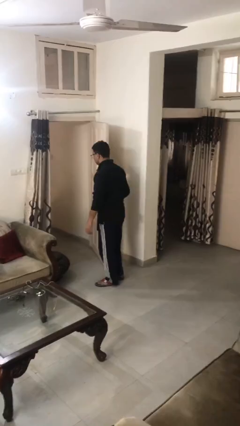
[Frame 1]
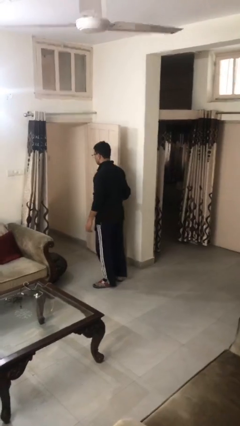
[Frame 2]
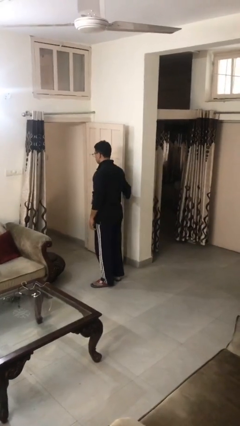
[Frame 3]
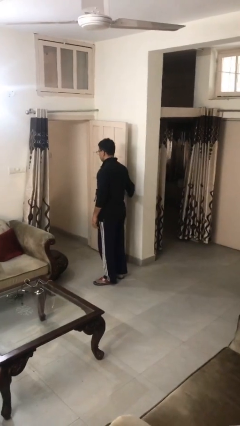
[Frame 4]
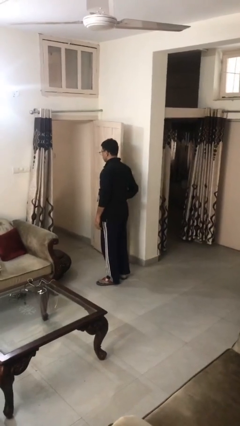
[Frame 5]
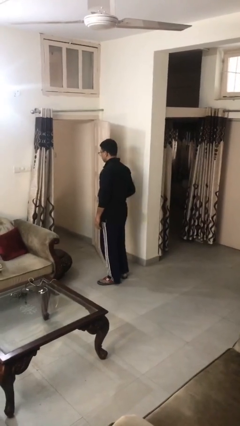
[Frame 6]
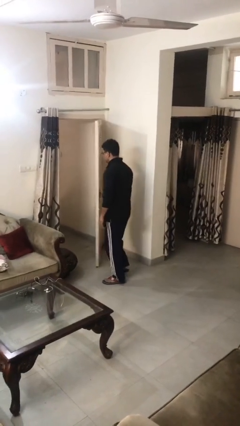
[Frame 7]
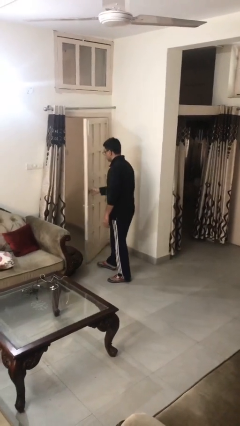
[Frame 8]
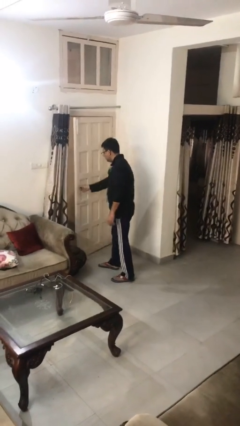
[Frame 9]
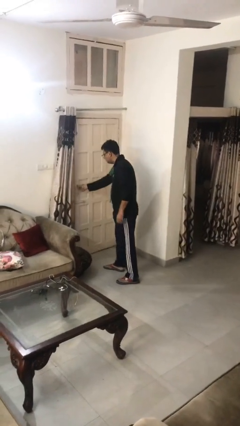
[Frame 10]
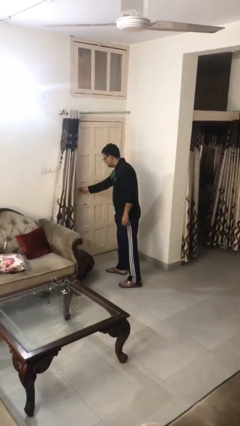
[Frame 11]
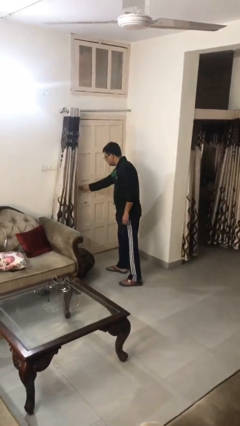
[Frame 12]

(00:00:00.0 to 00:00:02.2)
person closes facility door

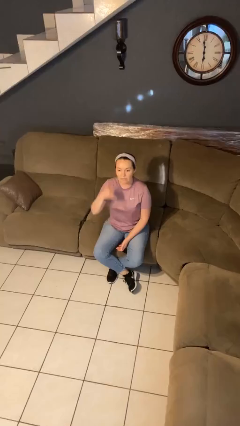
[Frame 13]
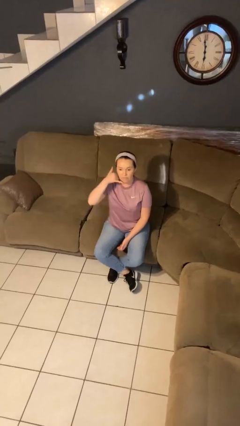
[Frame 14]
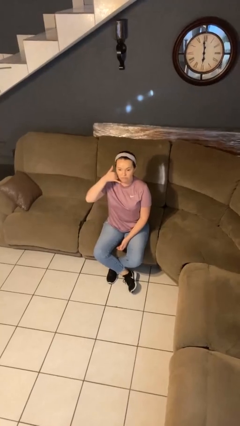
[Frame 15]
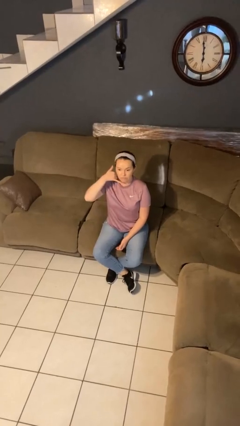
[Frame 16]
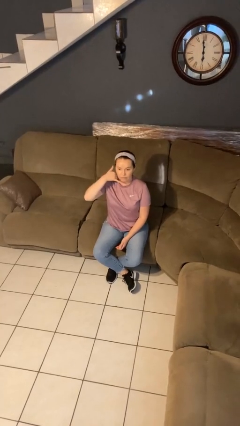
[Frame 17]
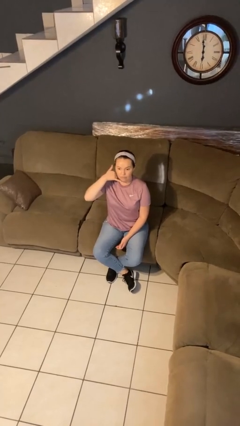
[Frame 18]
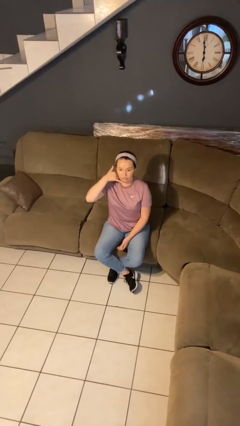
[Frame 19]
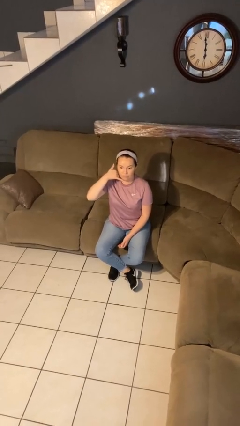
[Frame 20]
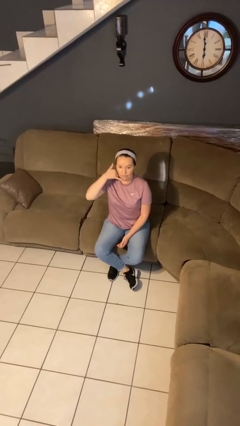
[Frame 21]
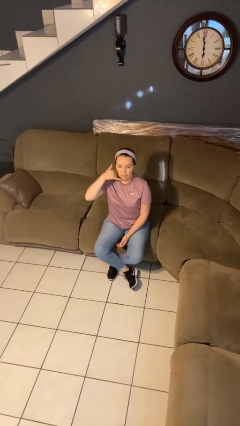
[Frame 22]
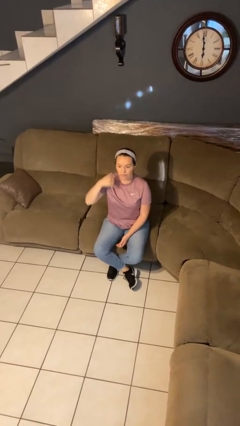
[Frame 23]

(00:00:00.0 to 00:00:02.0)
person gestures call me

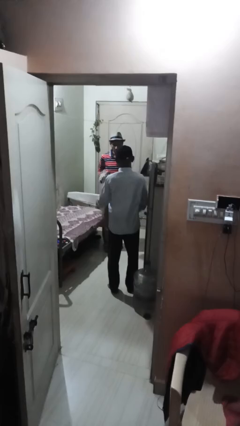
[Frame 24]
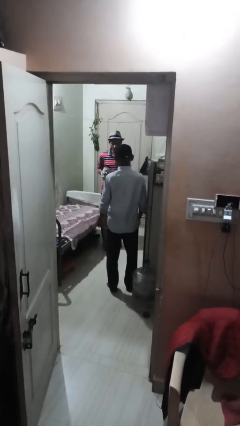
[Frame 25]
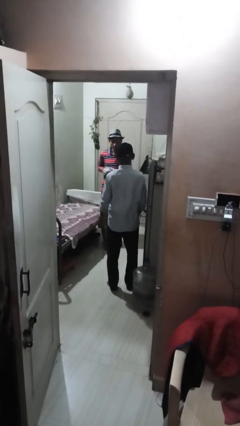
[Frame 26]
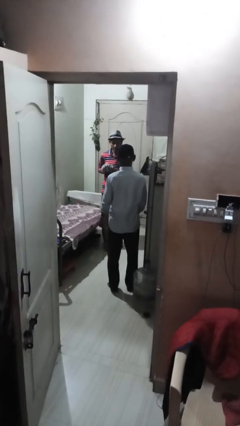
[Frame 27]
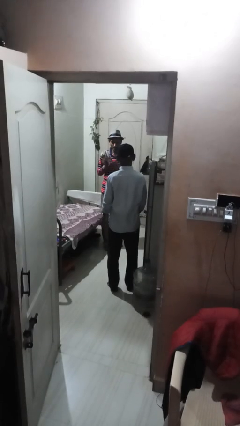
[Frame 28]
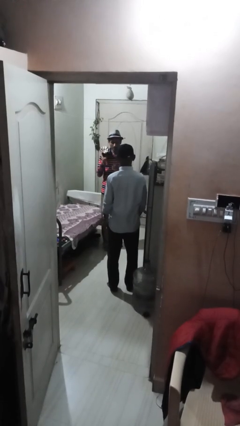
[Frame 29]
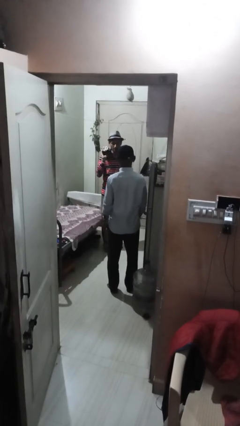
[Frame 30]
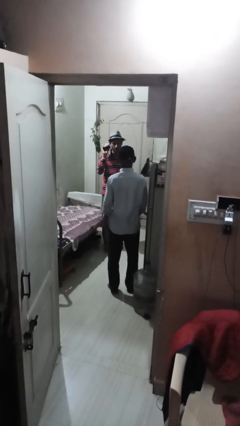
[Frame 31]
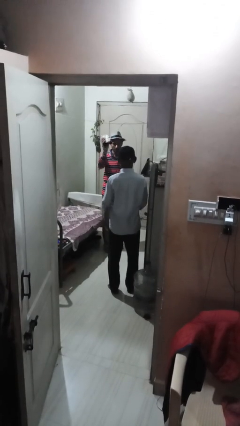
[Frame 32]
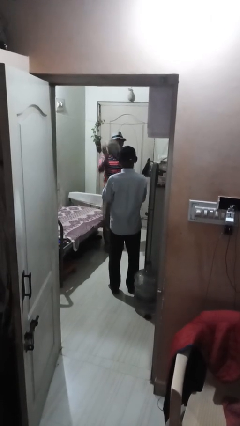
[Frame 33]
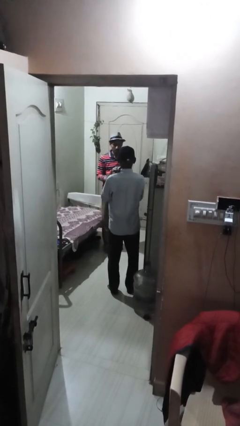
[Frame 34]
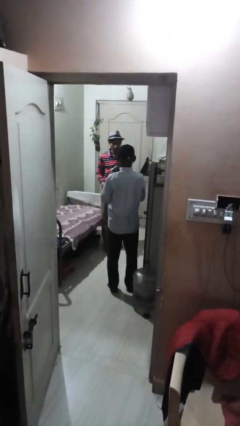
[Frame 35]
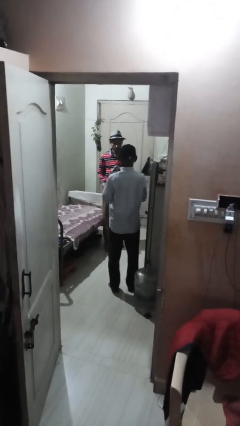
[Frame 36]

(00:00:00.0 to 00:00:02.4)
person catches object from person

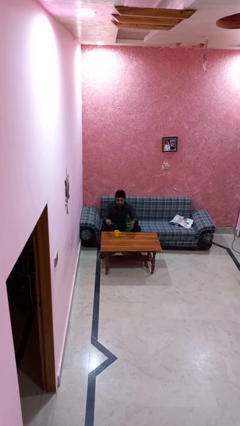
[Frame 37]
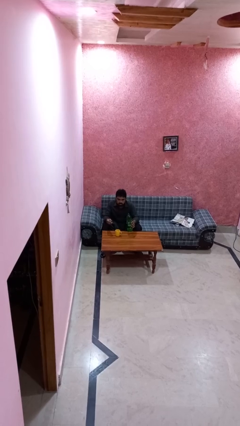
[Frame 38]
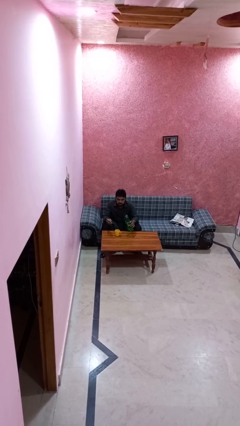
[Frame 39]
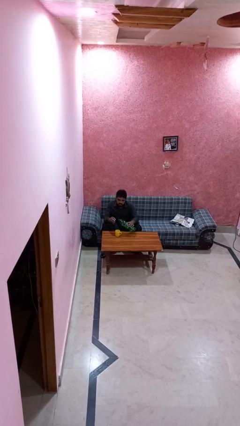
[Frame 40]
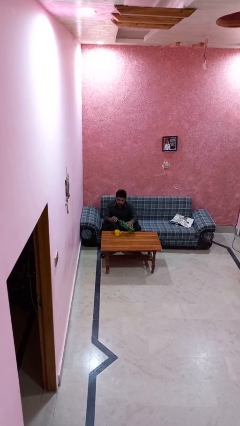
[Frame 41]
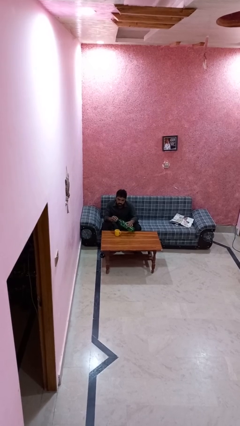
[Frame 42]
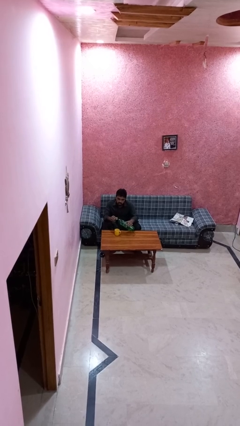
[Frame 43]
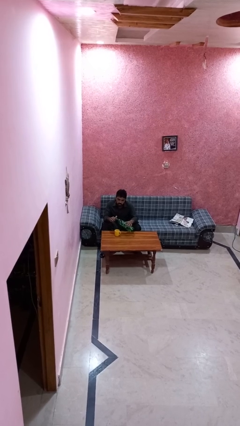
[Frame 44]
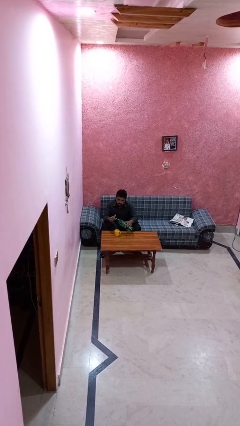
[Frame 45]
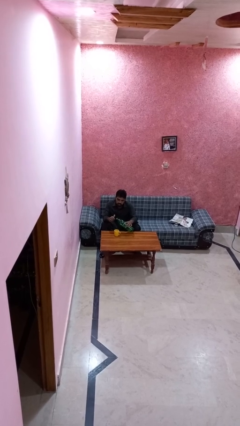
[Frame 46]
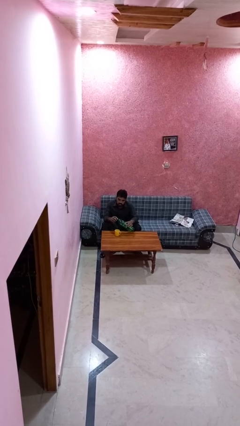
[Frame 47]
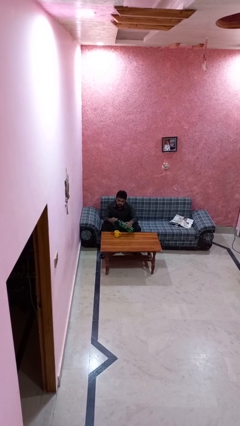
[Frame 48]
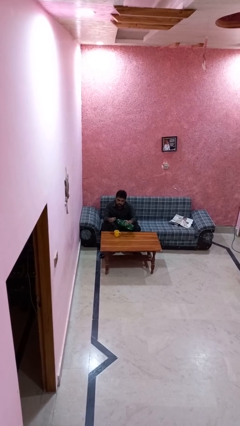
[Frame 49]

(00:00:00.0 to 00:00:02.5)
person screws lid to bottle

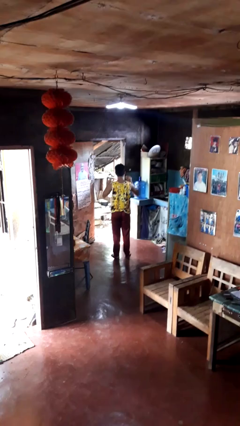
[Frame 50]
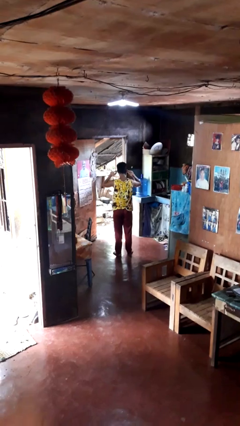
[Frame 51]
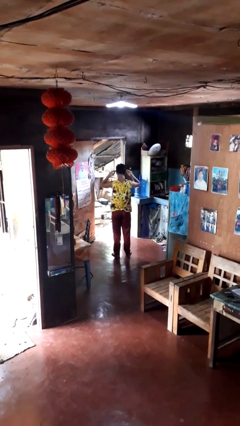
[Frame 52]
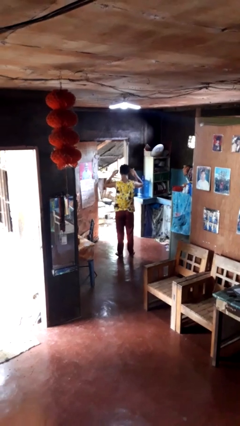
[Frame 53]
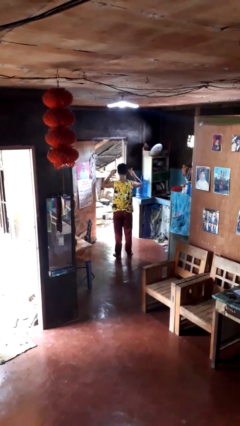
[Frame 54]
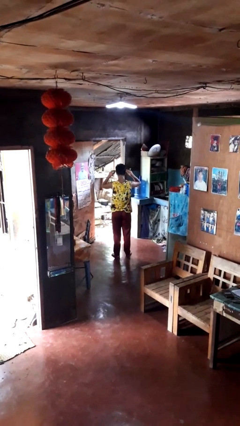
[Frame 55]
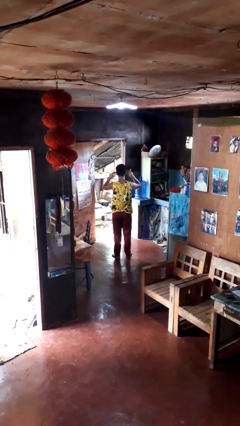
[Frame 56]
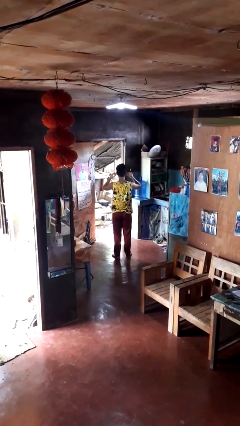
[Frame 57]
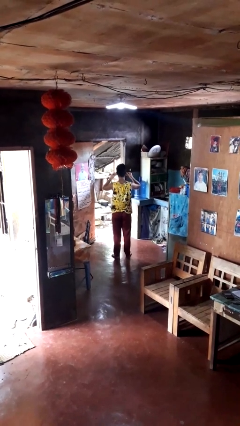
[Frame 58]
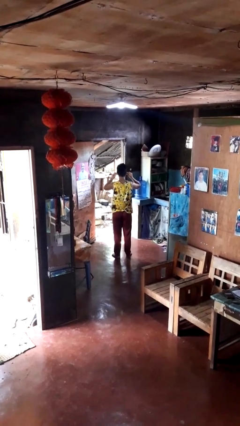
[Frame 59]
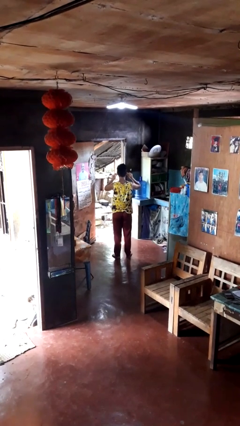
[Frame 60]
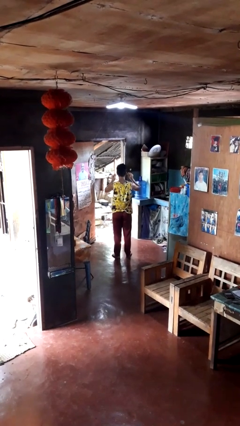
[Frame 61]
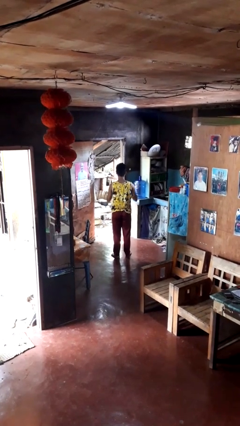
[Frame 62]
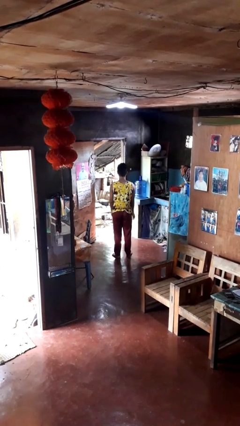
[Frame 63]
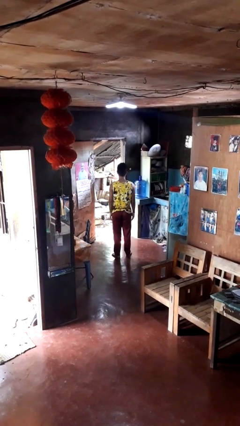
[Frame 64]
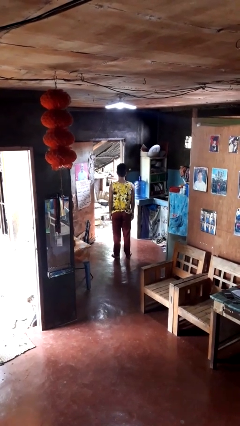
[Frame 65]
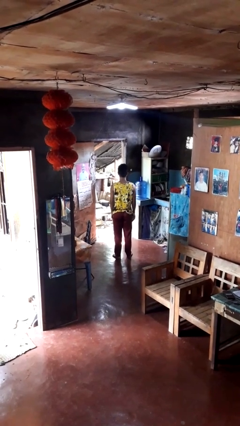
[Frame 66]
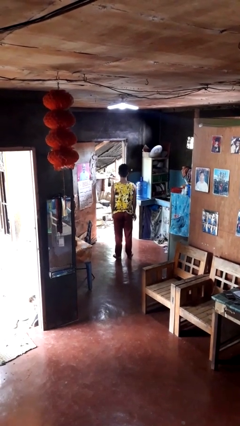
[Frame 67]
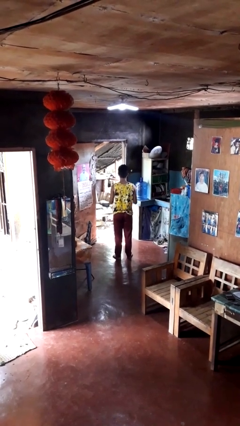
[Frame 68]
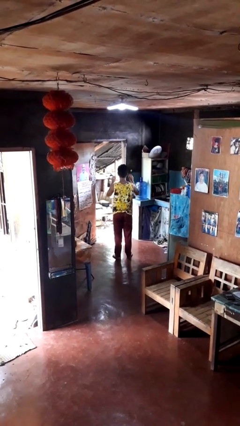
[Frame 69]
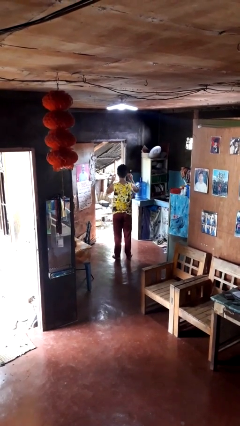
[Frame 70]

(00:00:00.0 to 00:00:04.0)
person puts on headphones

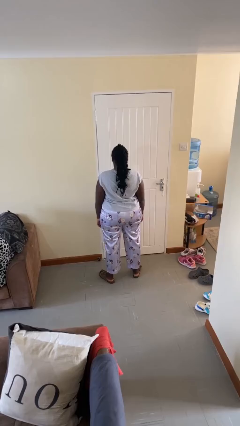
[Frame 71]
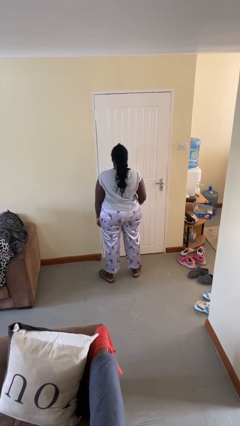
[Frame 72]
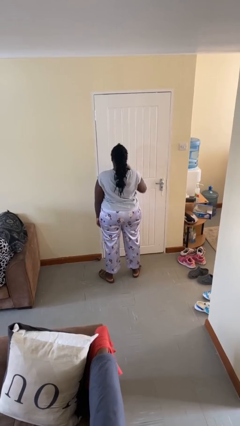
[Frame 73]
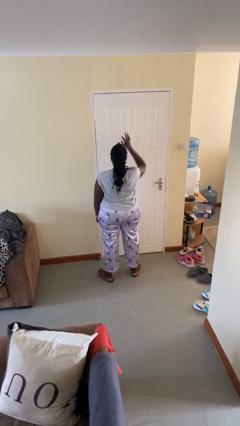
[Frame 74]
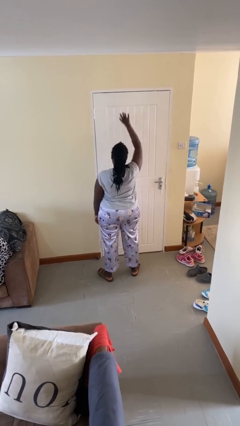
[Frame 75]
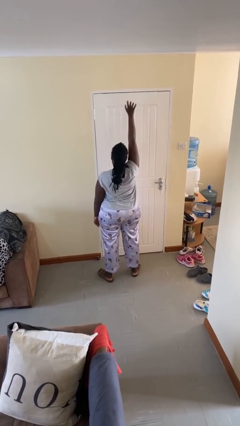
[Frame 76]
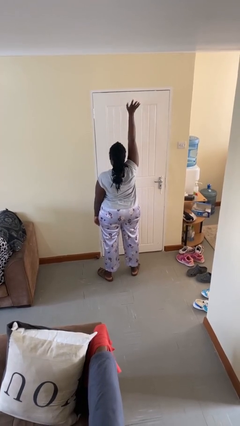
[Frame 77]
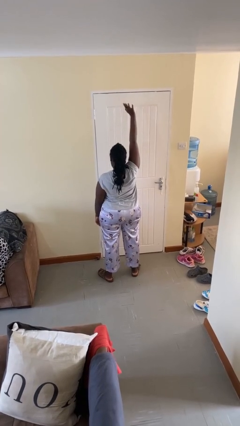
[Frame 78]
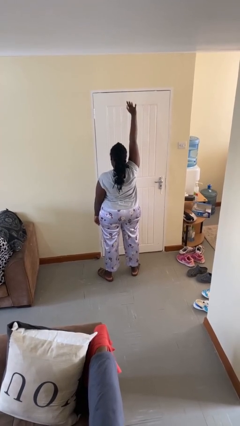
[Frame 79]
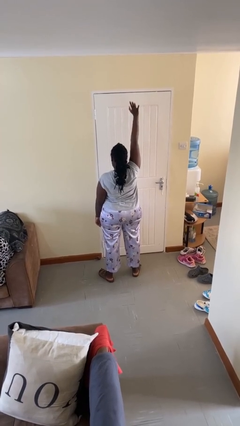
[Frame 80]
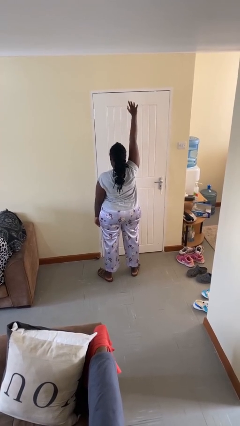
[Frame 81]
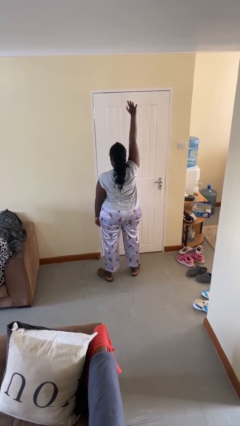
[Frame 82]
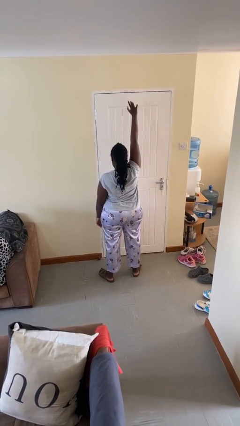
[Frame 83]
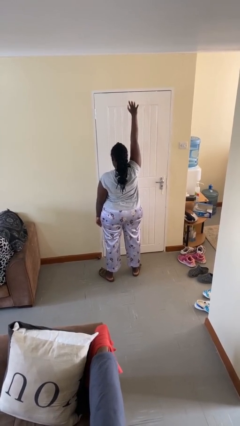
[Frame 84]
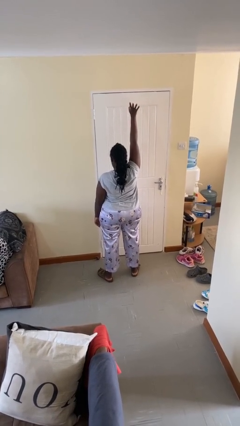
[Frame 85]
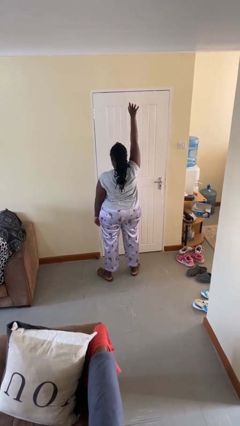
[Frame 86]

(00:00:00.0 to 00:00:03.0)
person gestures raise hand

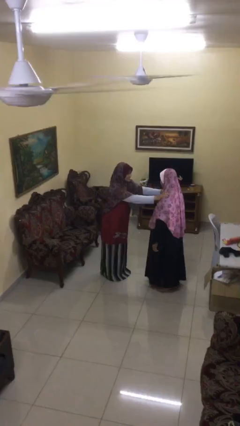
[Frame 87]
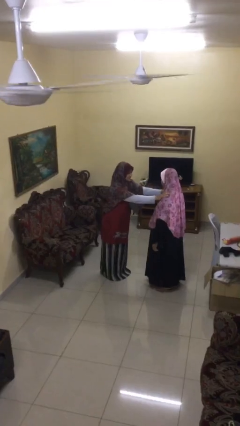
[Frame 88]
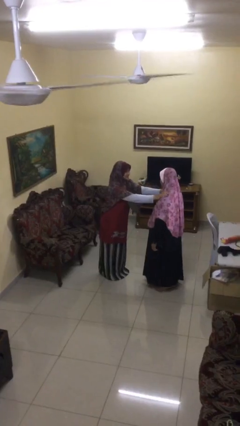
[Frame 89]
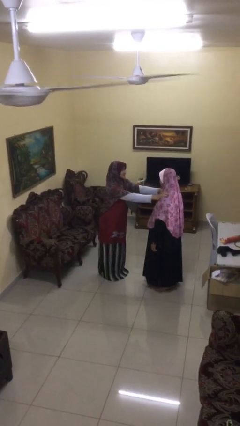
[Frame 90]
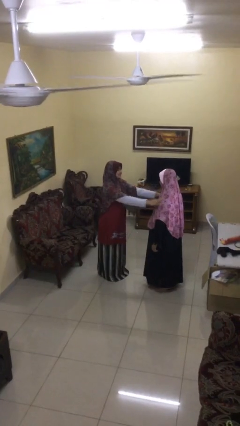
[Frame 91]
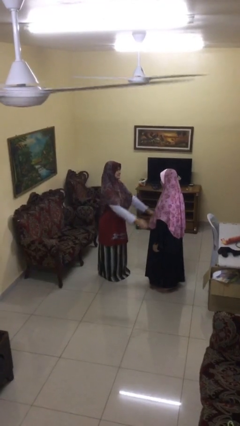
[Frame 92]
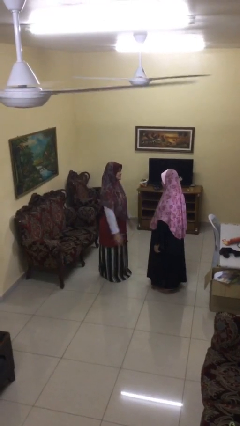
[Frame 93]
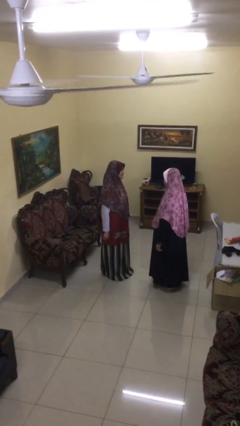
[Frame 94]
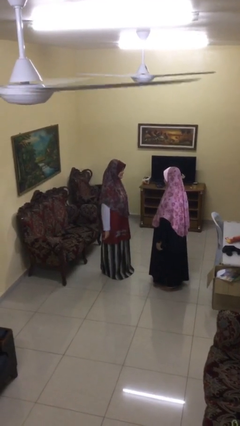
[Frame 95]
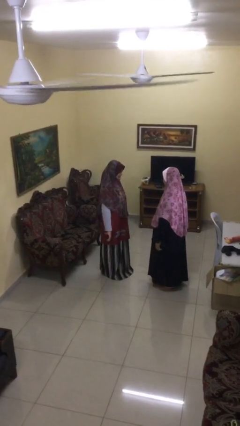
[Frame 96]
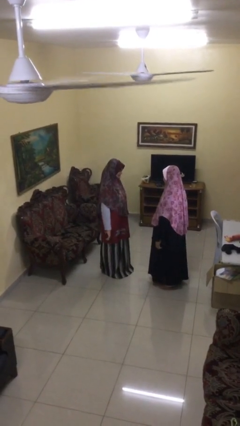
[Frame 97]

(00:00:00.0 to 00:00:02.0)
person pounds shoulders of person
